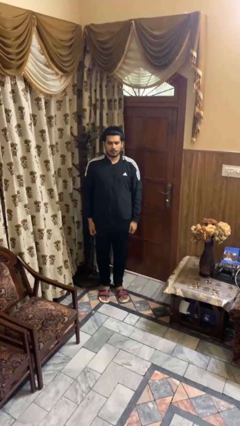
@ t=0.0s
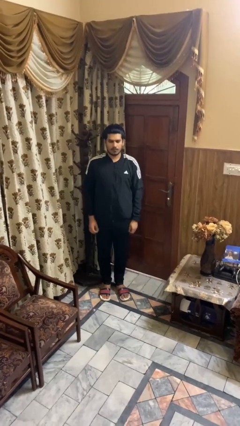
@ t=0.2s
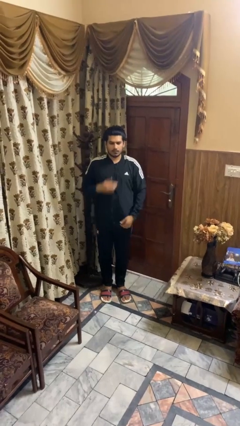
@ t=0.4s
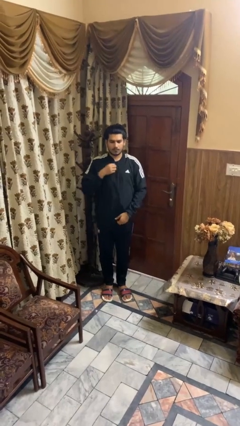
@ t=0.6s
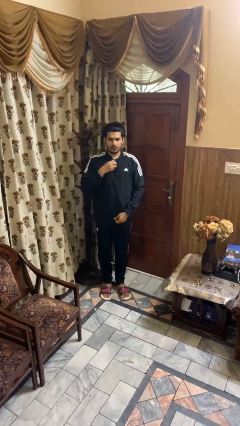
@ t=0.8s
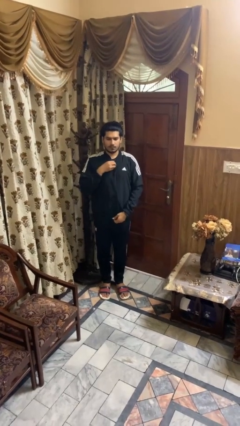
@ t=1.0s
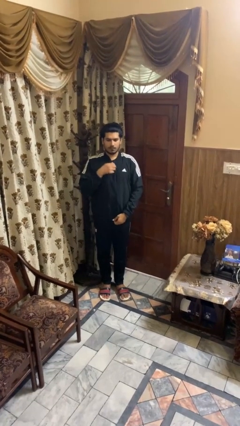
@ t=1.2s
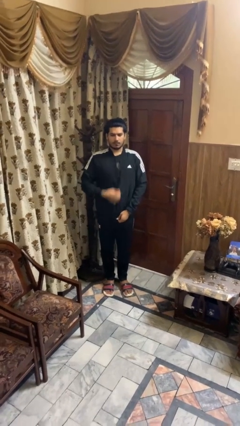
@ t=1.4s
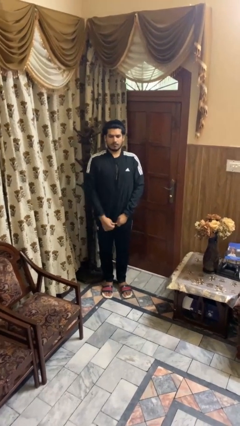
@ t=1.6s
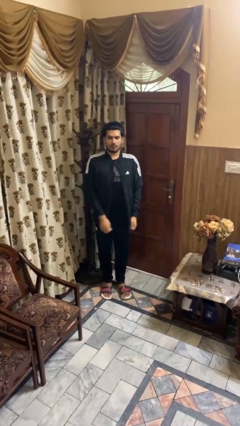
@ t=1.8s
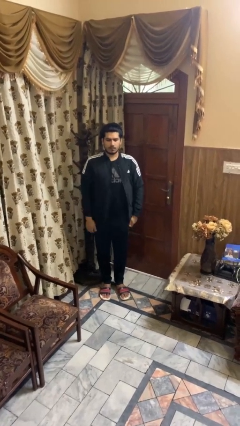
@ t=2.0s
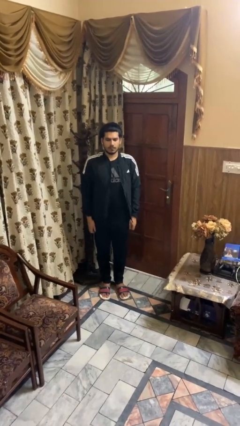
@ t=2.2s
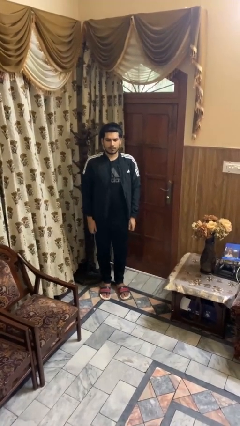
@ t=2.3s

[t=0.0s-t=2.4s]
person unzips jacket

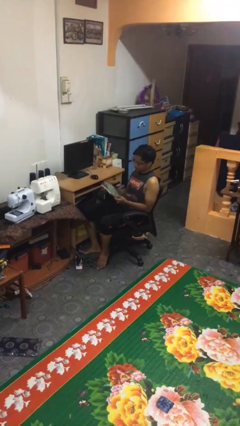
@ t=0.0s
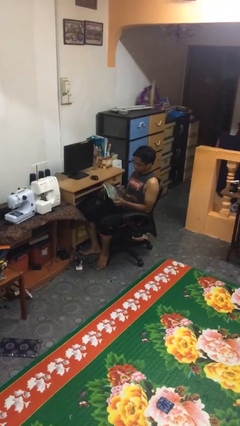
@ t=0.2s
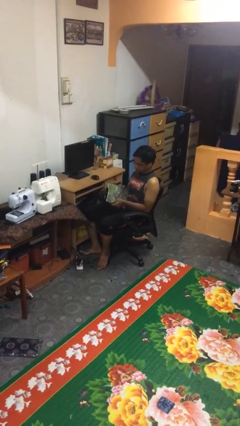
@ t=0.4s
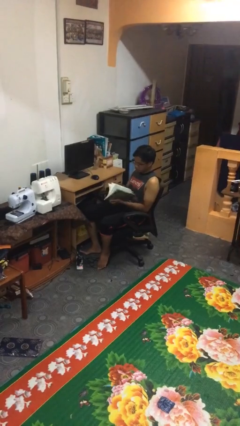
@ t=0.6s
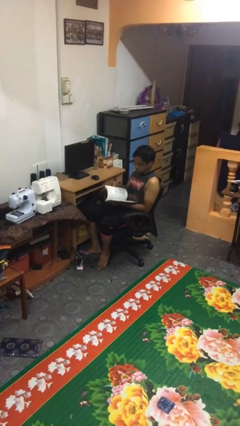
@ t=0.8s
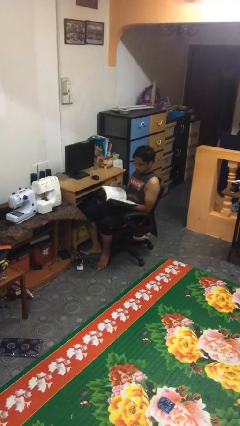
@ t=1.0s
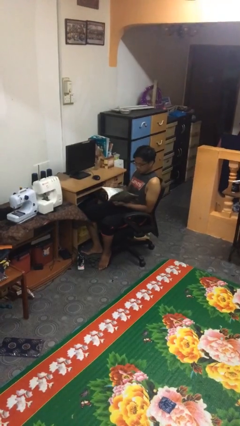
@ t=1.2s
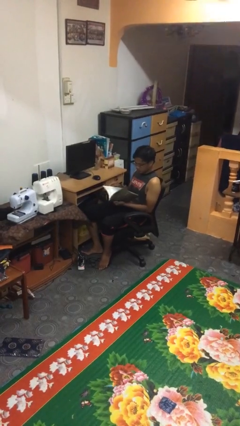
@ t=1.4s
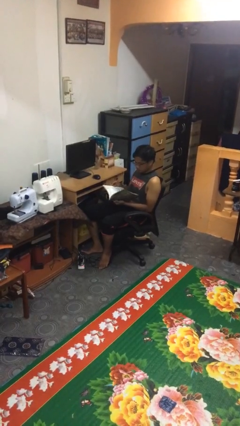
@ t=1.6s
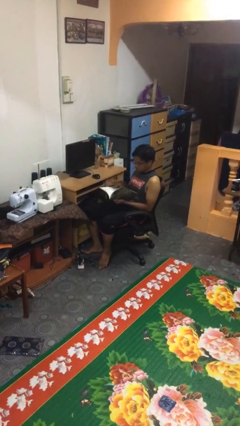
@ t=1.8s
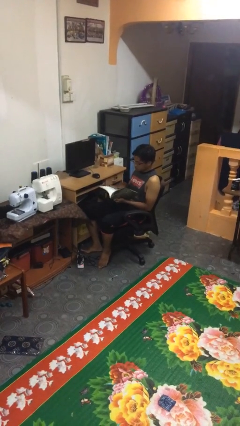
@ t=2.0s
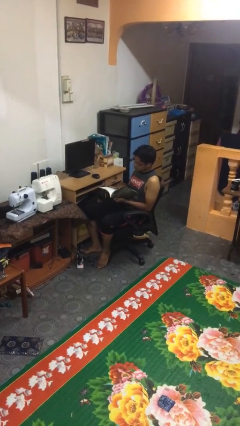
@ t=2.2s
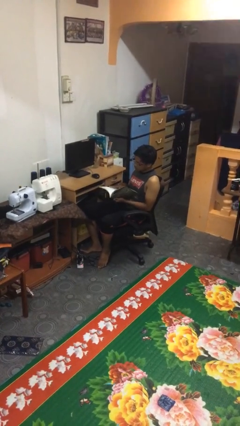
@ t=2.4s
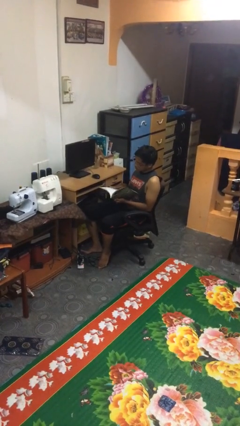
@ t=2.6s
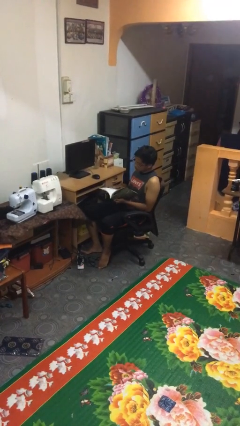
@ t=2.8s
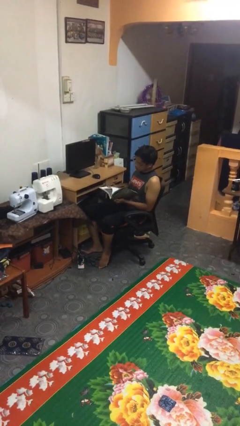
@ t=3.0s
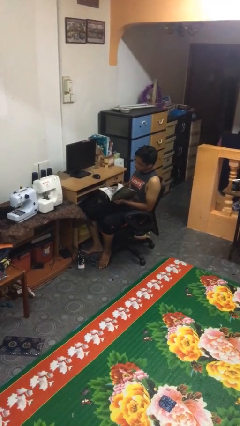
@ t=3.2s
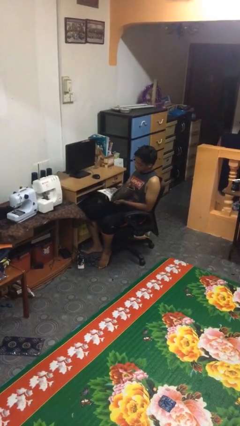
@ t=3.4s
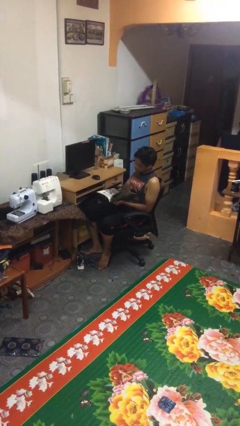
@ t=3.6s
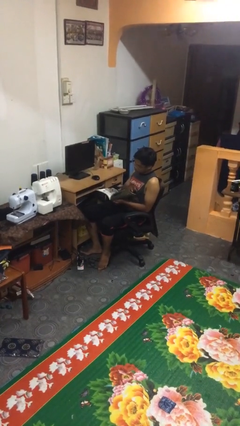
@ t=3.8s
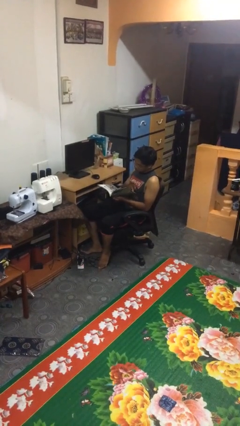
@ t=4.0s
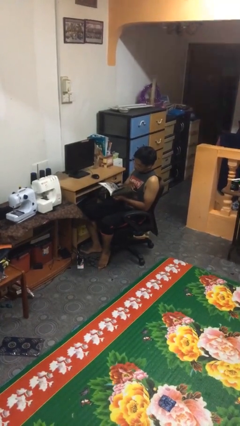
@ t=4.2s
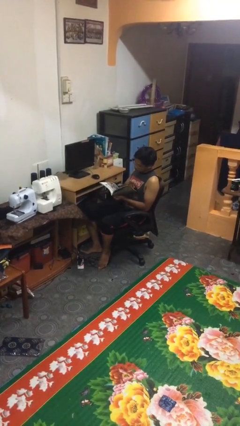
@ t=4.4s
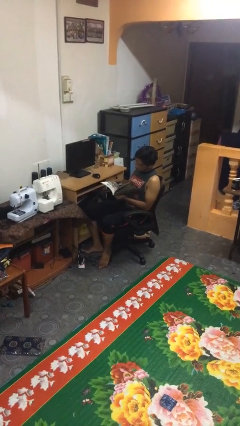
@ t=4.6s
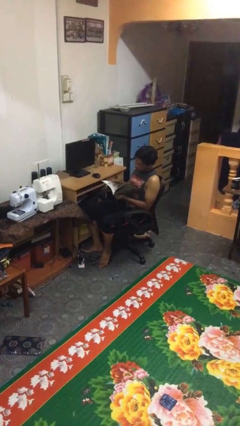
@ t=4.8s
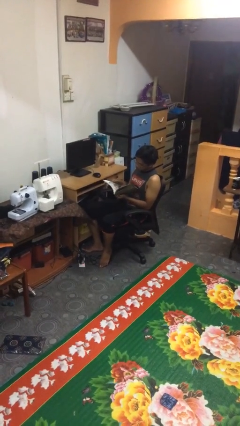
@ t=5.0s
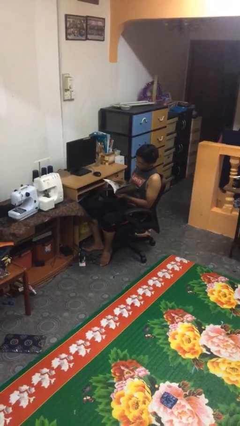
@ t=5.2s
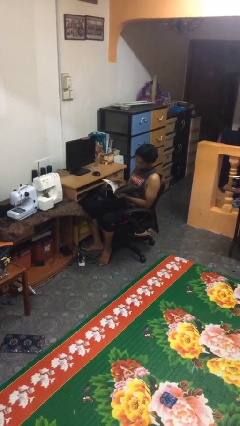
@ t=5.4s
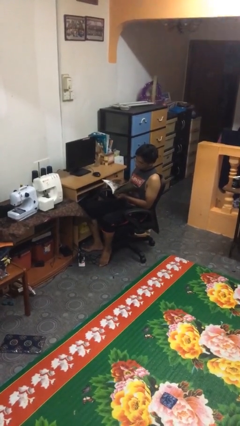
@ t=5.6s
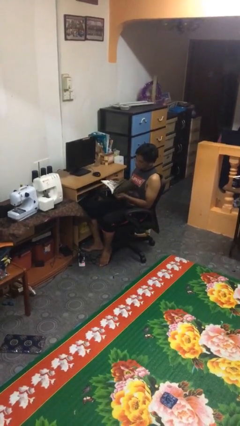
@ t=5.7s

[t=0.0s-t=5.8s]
person reads document

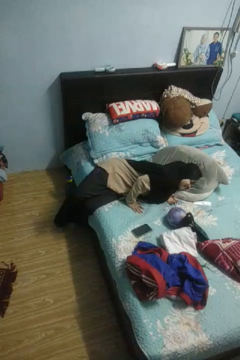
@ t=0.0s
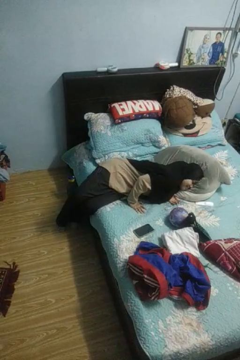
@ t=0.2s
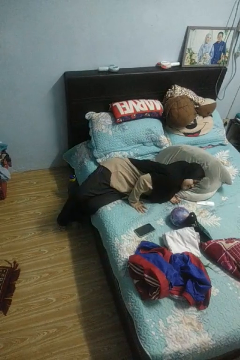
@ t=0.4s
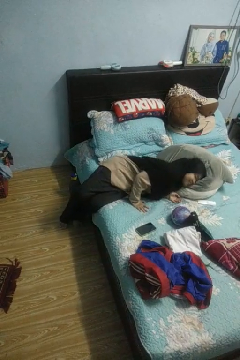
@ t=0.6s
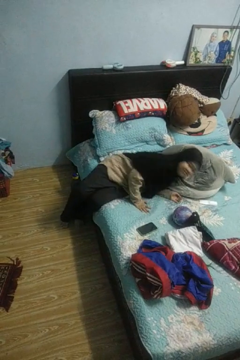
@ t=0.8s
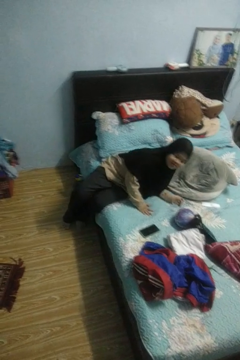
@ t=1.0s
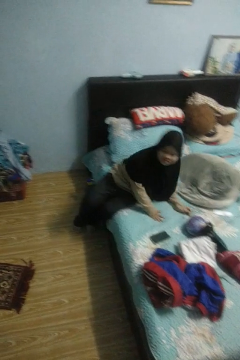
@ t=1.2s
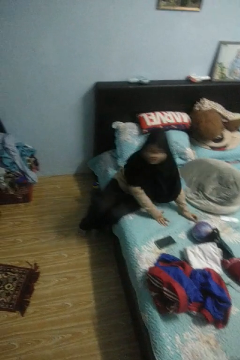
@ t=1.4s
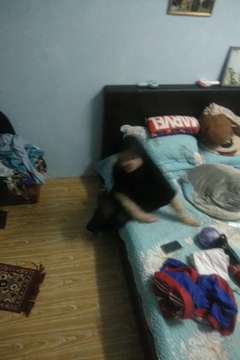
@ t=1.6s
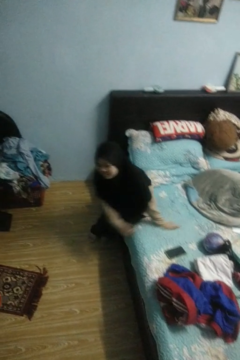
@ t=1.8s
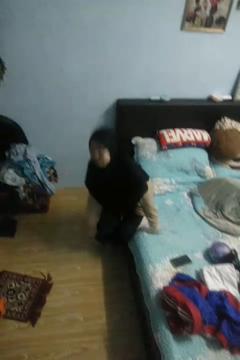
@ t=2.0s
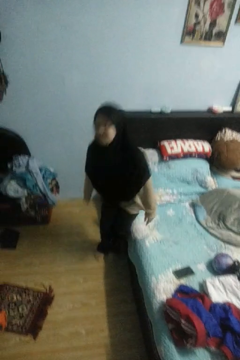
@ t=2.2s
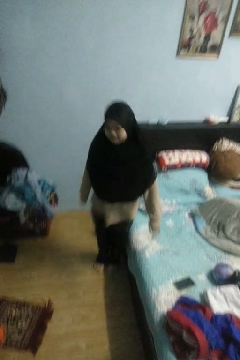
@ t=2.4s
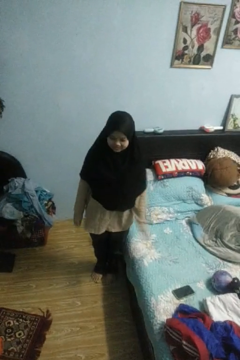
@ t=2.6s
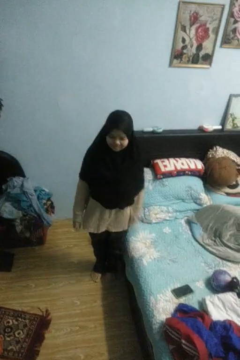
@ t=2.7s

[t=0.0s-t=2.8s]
person stands up

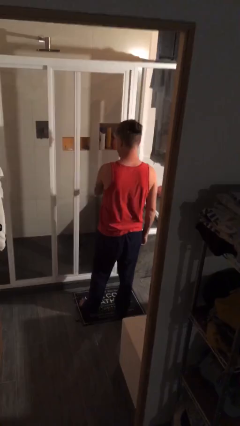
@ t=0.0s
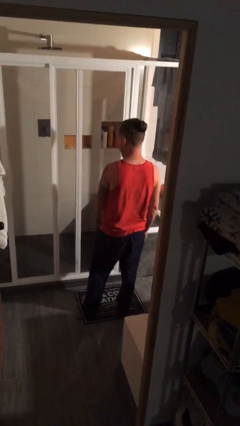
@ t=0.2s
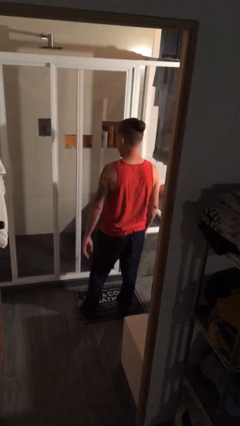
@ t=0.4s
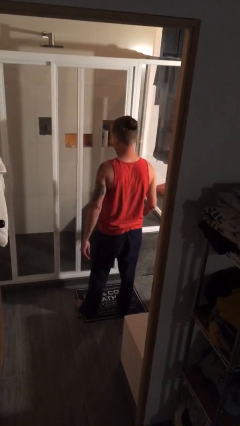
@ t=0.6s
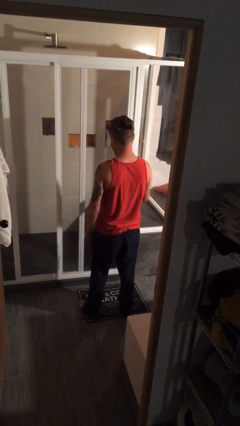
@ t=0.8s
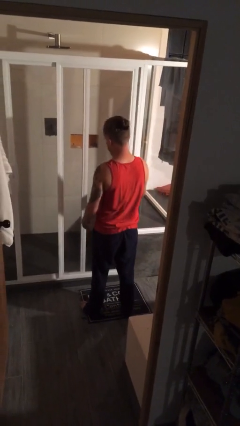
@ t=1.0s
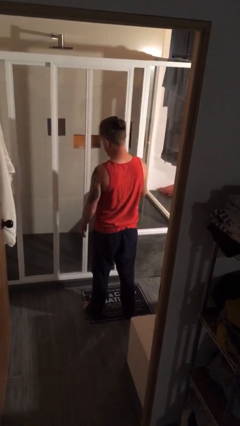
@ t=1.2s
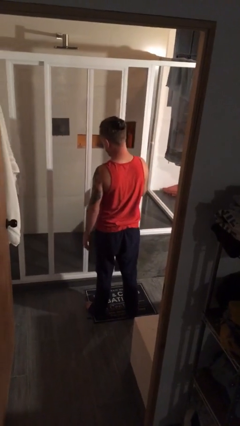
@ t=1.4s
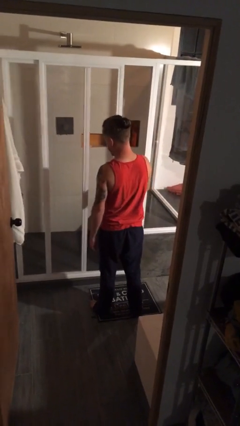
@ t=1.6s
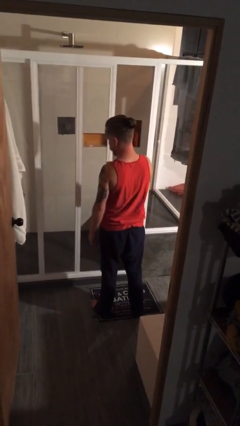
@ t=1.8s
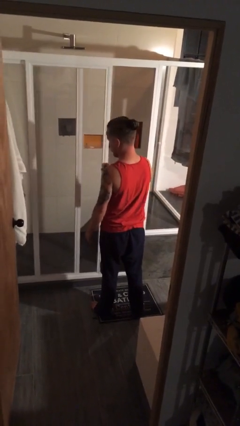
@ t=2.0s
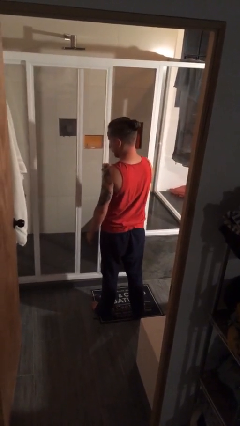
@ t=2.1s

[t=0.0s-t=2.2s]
person opens sliding door

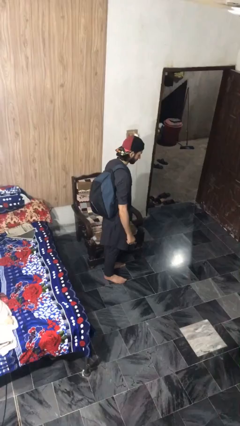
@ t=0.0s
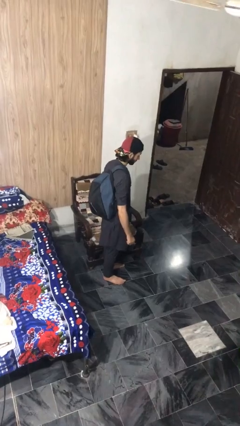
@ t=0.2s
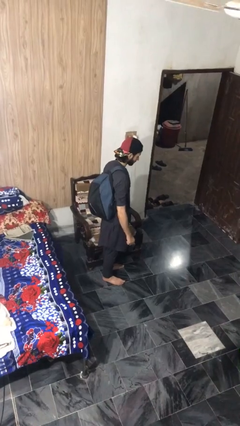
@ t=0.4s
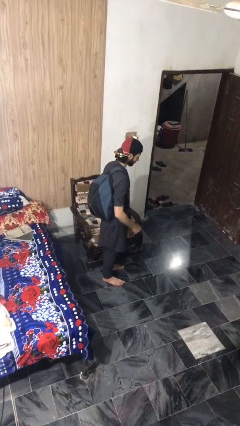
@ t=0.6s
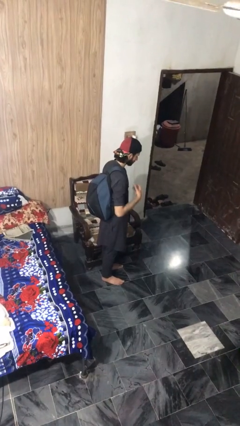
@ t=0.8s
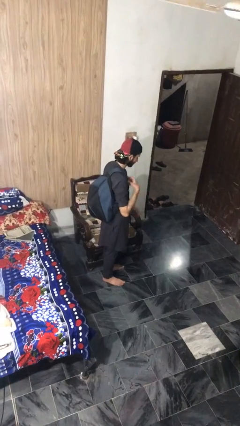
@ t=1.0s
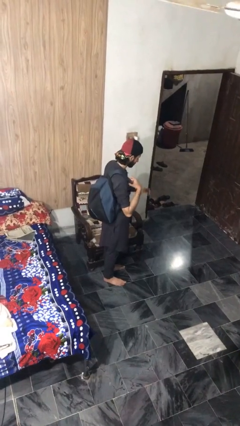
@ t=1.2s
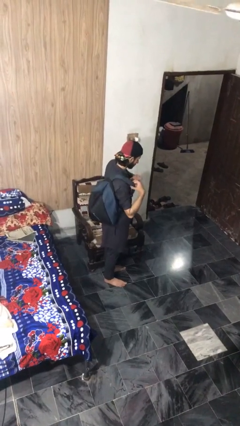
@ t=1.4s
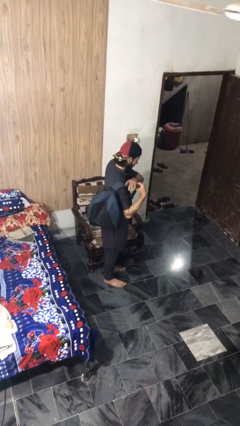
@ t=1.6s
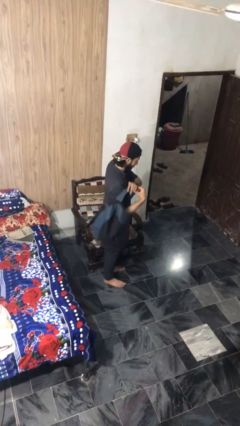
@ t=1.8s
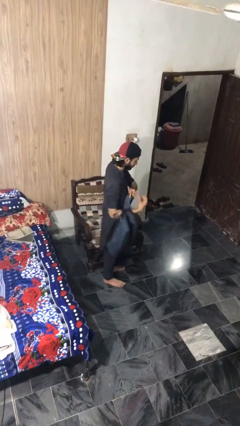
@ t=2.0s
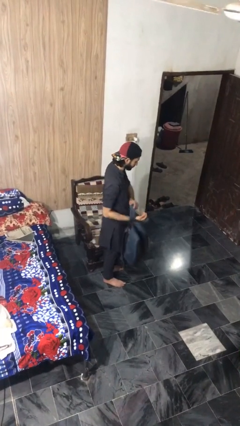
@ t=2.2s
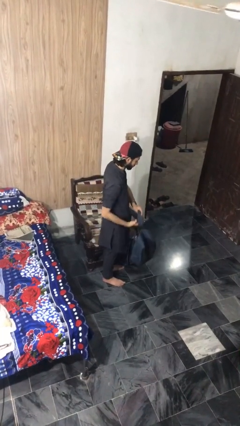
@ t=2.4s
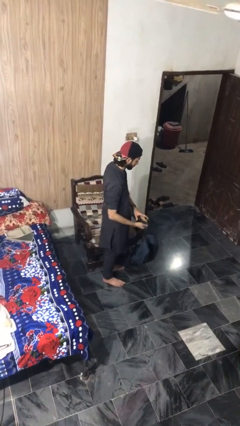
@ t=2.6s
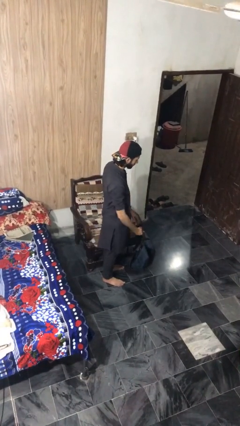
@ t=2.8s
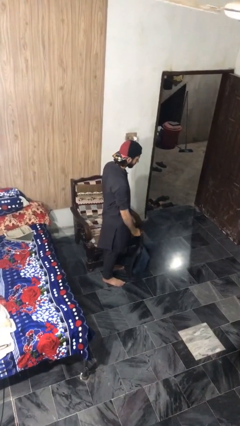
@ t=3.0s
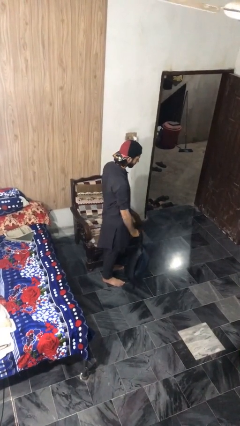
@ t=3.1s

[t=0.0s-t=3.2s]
person takes off backpack

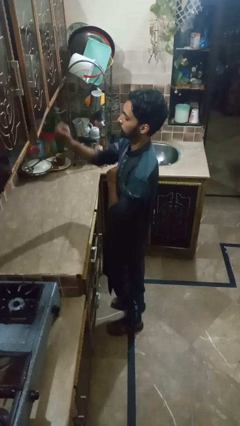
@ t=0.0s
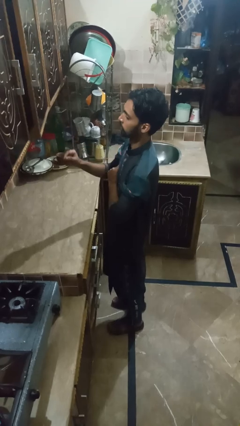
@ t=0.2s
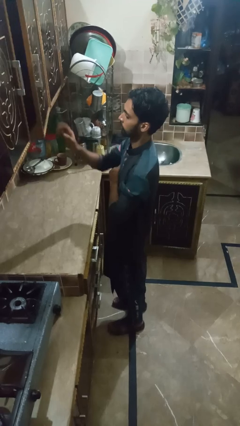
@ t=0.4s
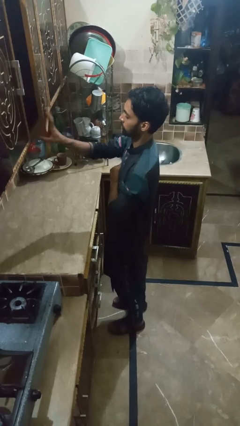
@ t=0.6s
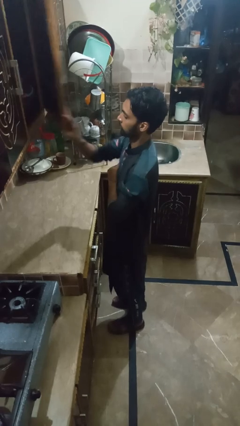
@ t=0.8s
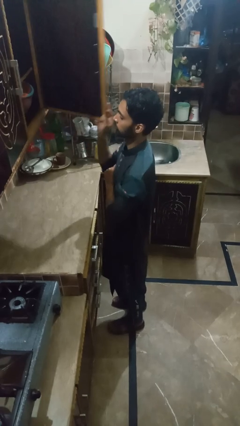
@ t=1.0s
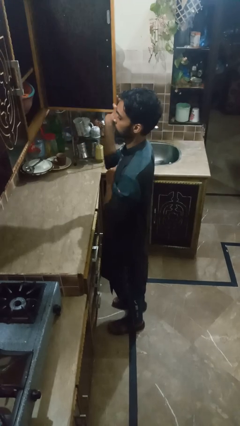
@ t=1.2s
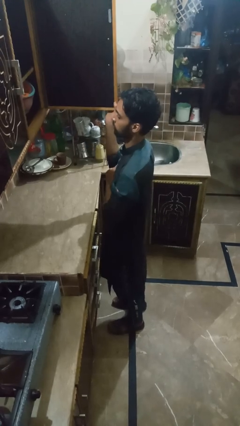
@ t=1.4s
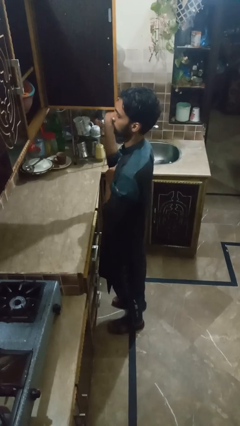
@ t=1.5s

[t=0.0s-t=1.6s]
person opens kitchen drawer
